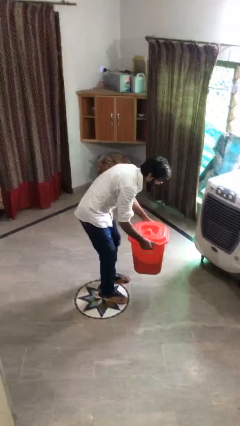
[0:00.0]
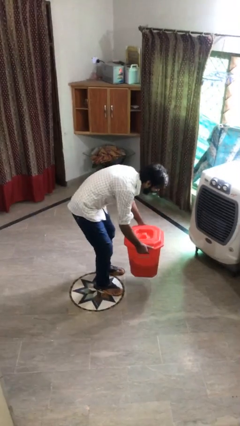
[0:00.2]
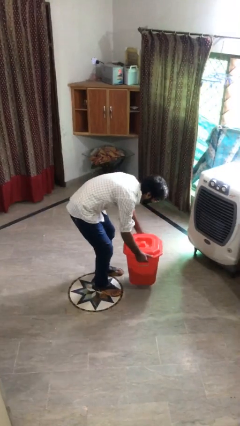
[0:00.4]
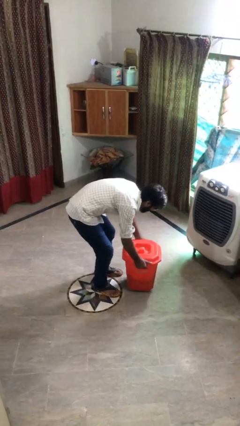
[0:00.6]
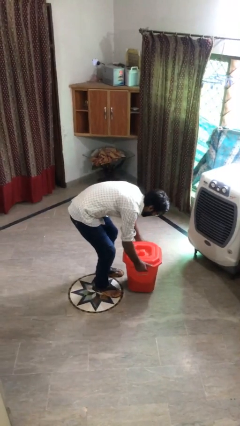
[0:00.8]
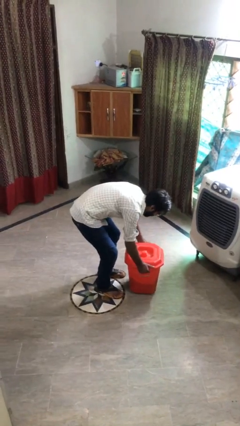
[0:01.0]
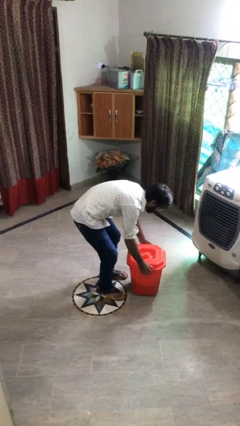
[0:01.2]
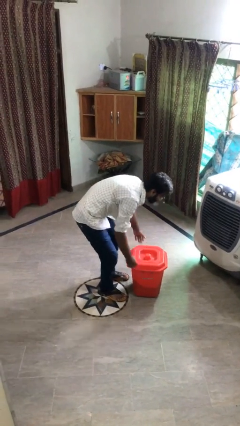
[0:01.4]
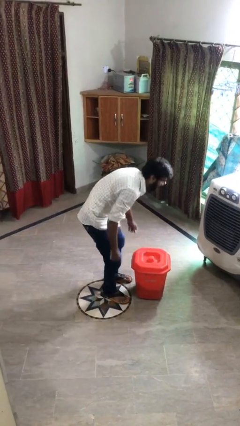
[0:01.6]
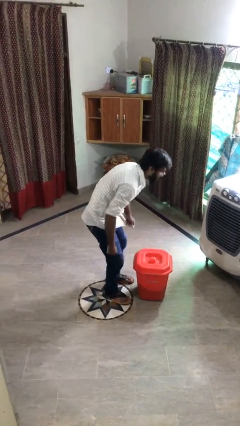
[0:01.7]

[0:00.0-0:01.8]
person puts down object on floor

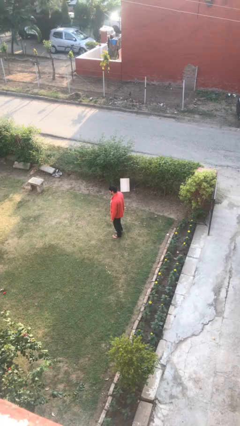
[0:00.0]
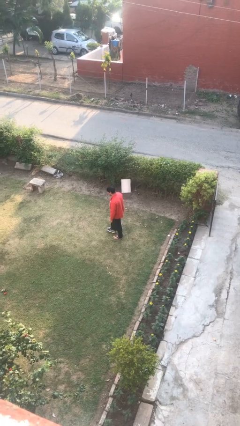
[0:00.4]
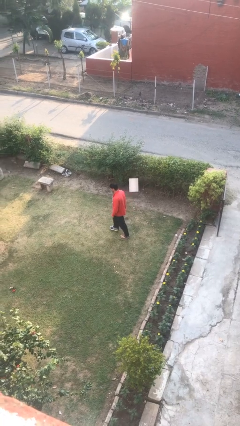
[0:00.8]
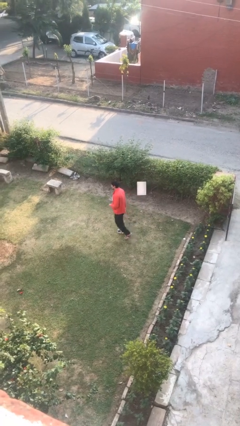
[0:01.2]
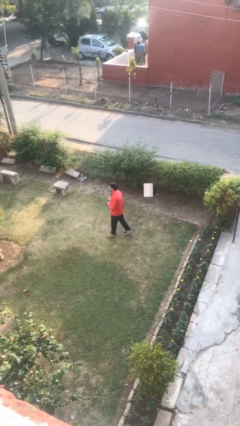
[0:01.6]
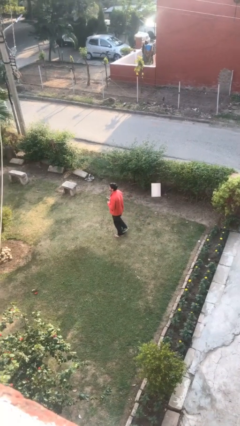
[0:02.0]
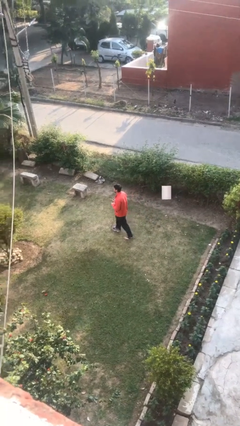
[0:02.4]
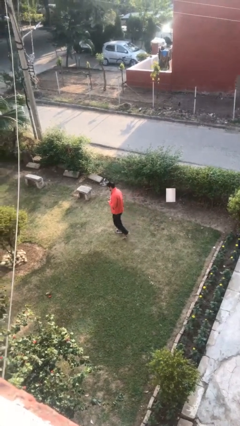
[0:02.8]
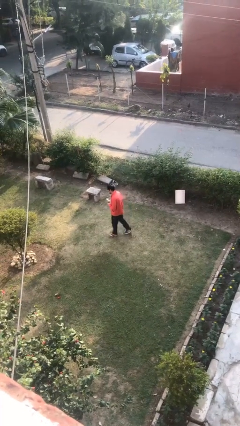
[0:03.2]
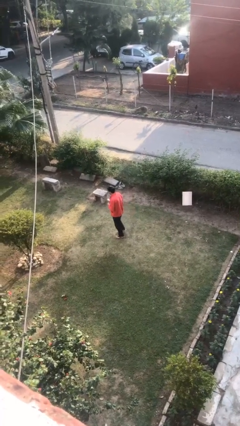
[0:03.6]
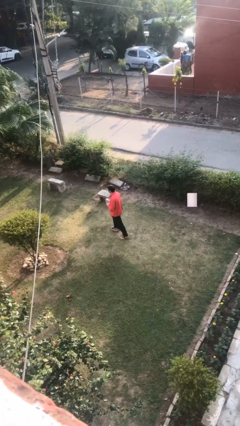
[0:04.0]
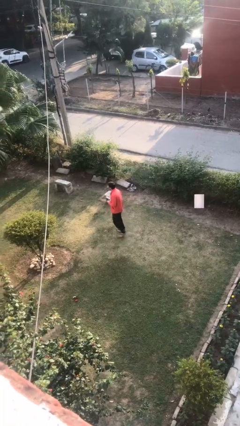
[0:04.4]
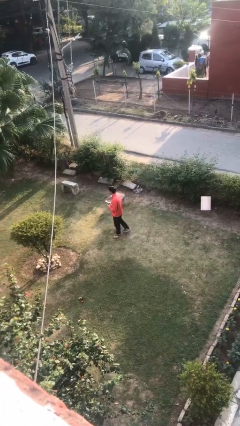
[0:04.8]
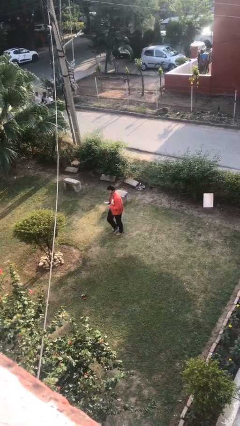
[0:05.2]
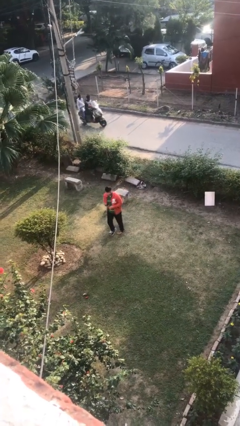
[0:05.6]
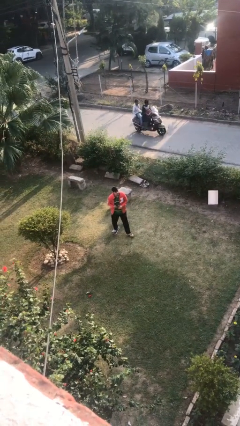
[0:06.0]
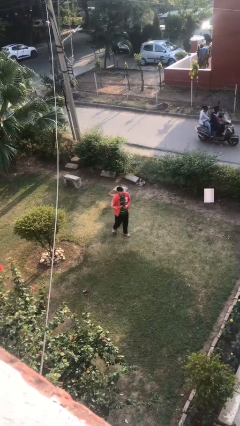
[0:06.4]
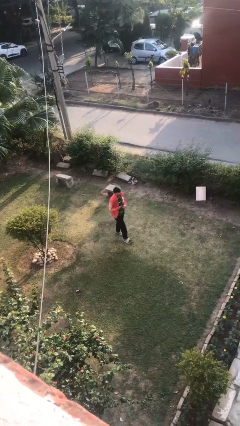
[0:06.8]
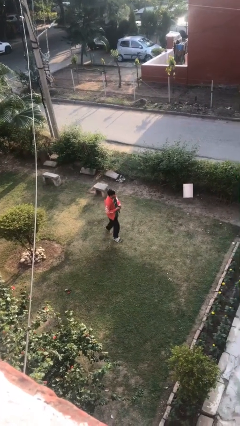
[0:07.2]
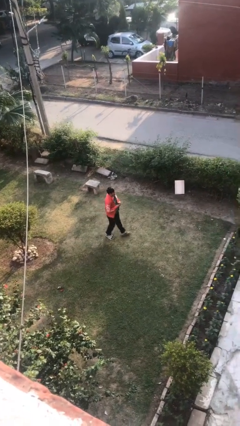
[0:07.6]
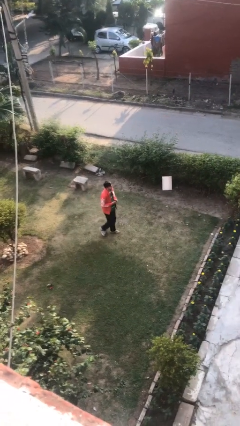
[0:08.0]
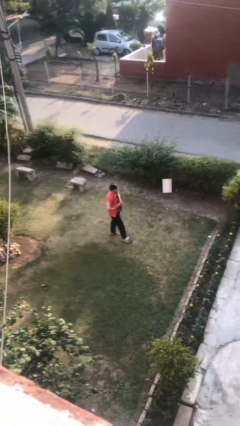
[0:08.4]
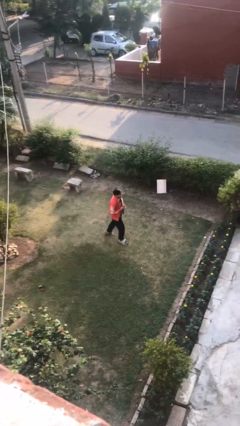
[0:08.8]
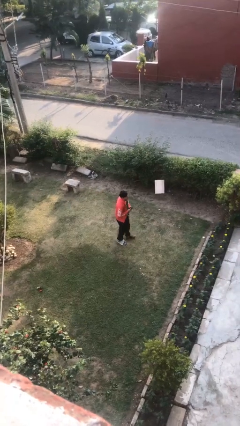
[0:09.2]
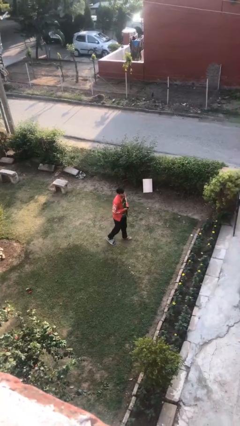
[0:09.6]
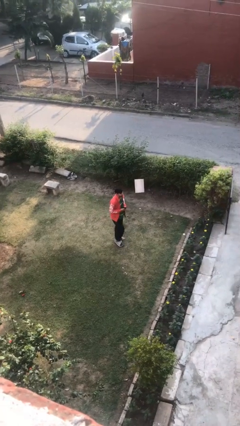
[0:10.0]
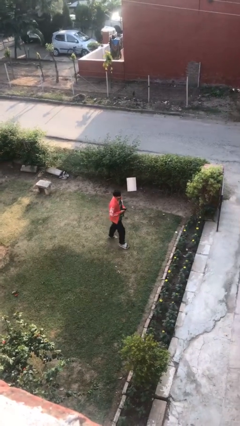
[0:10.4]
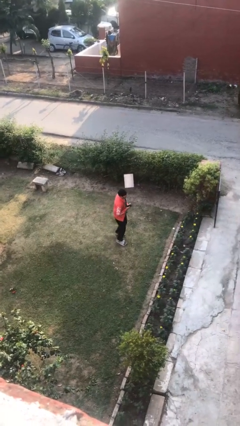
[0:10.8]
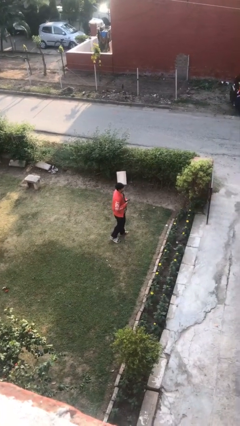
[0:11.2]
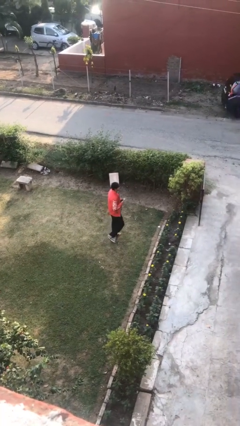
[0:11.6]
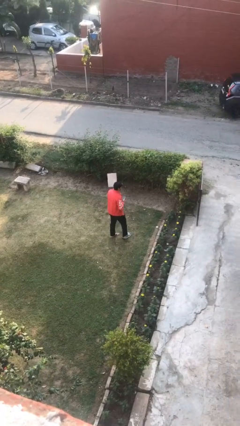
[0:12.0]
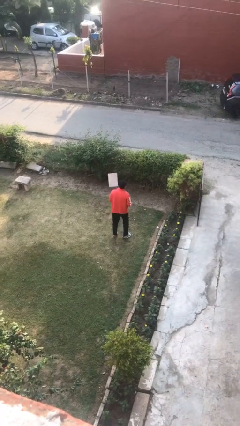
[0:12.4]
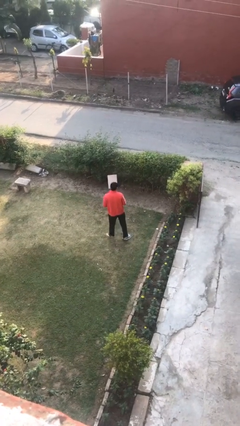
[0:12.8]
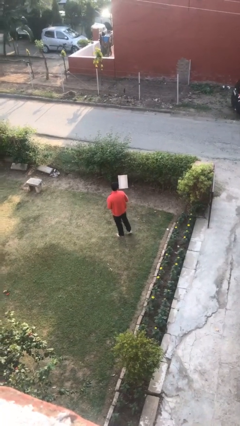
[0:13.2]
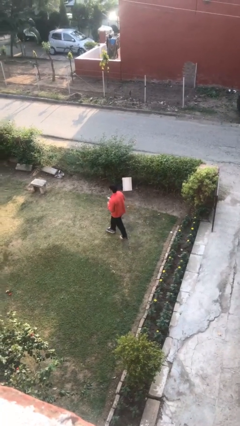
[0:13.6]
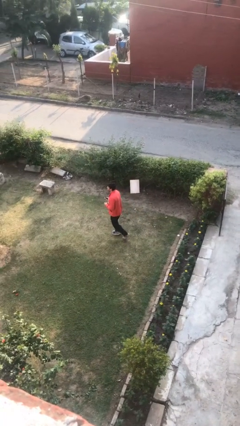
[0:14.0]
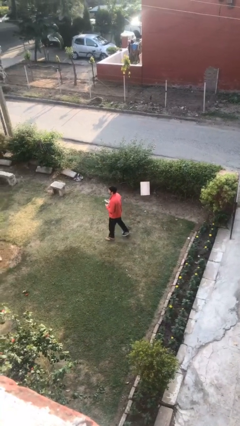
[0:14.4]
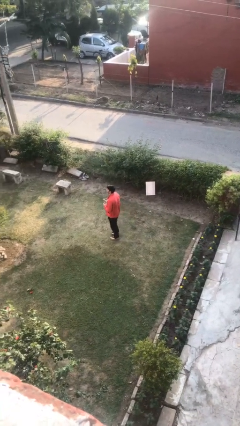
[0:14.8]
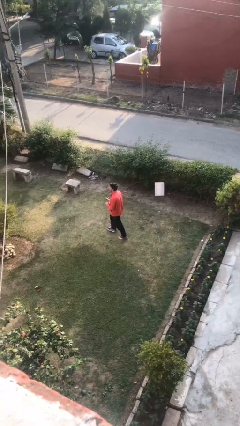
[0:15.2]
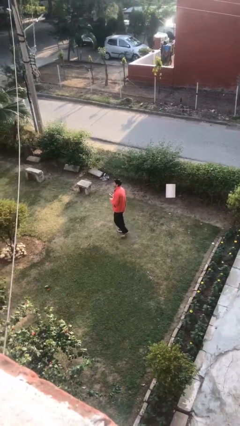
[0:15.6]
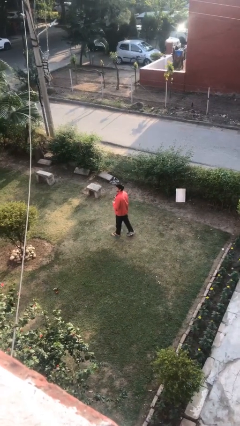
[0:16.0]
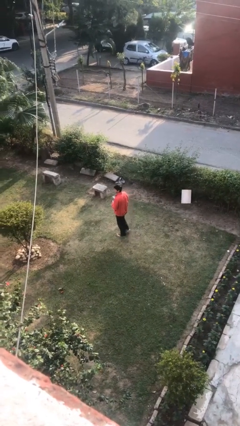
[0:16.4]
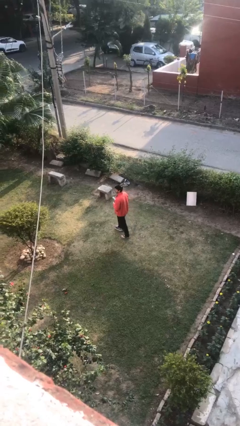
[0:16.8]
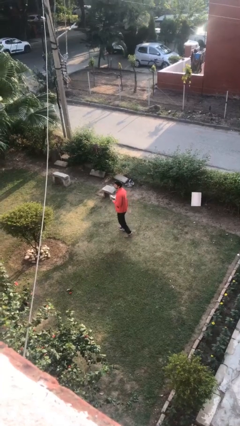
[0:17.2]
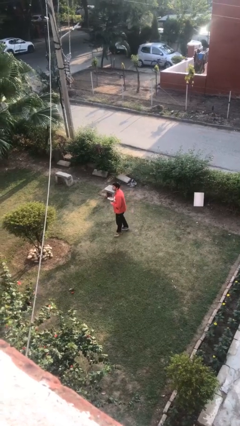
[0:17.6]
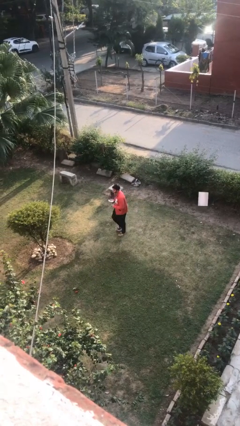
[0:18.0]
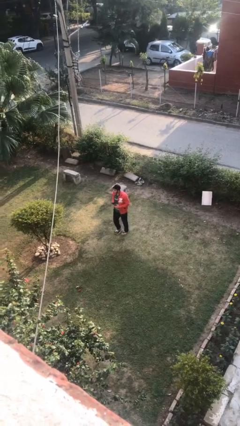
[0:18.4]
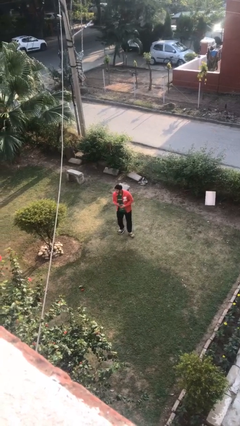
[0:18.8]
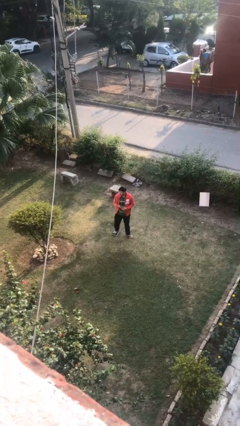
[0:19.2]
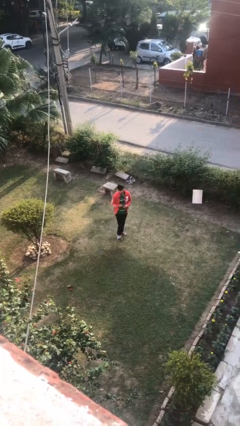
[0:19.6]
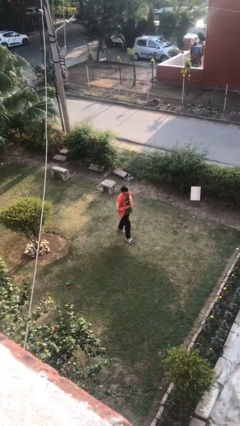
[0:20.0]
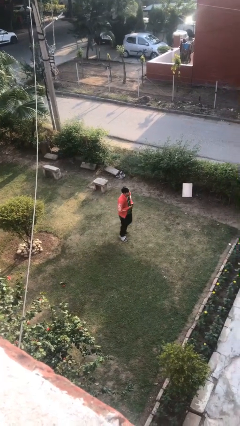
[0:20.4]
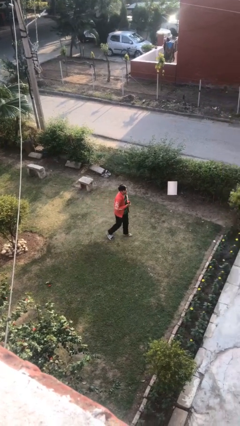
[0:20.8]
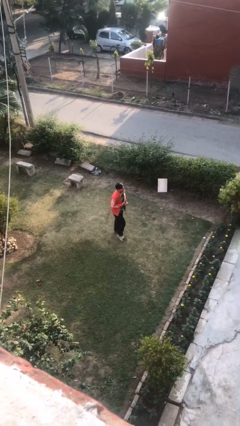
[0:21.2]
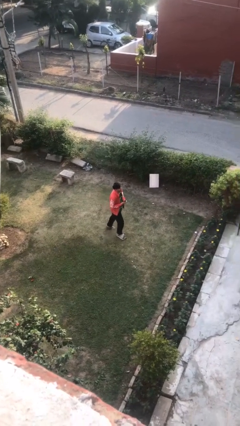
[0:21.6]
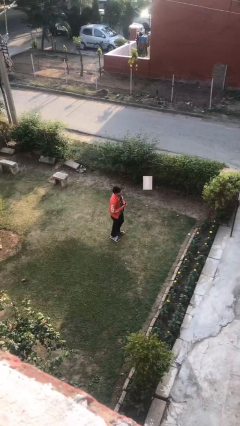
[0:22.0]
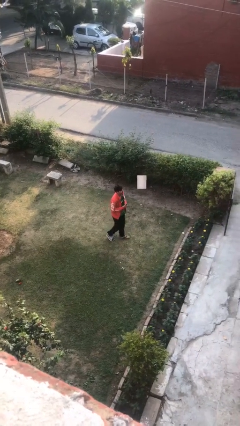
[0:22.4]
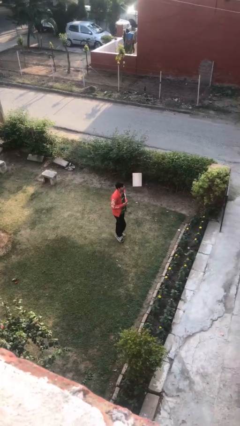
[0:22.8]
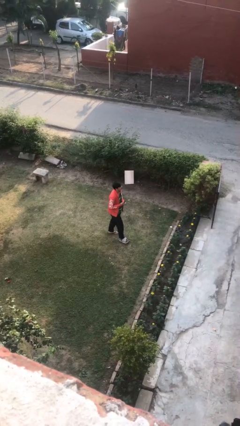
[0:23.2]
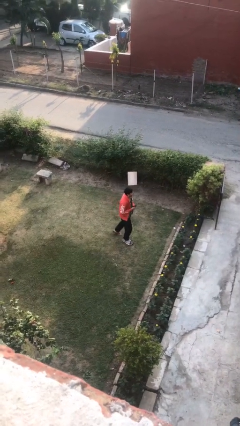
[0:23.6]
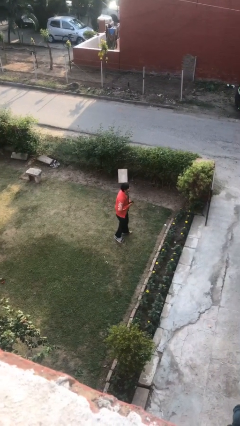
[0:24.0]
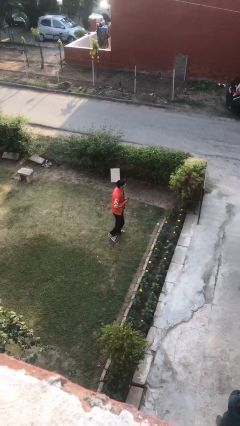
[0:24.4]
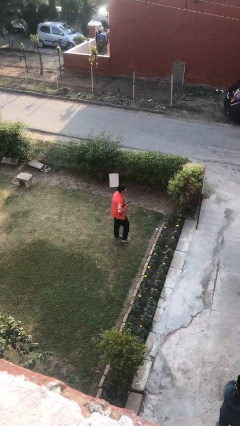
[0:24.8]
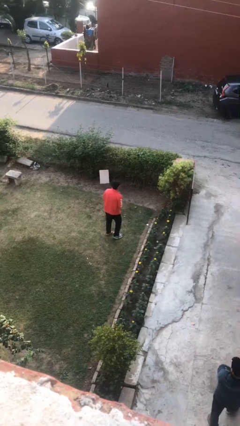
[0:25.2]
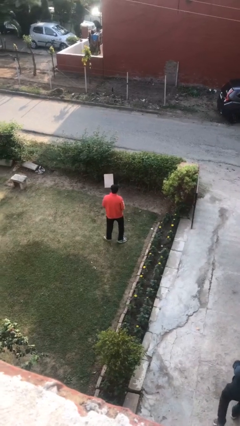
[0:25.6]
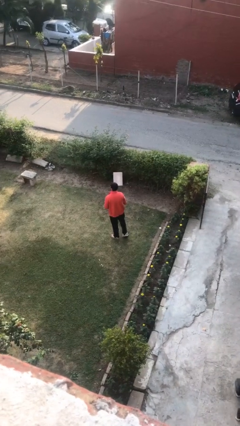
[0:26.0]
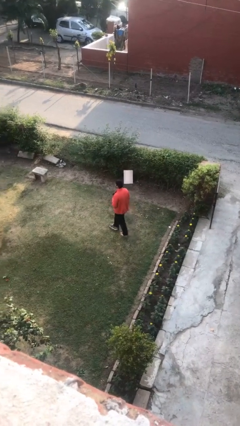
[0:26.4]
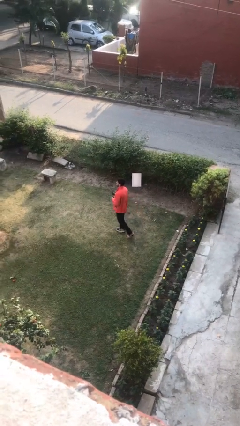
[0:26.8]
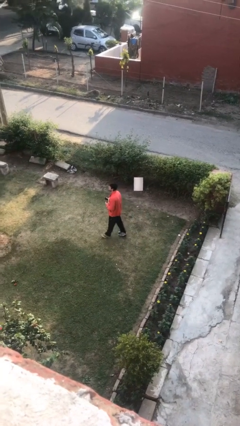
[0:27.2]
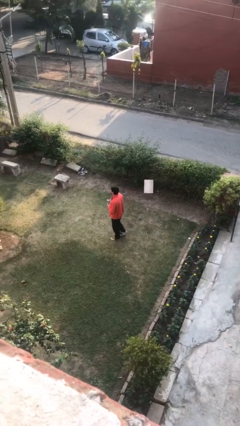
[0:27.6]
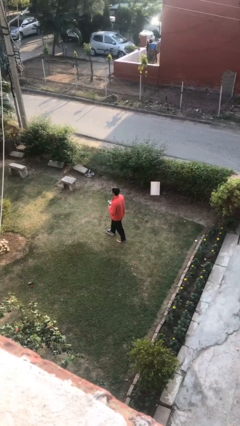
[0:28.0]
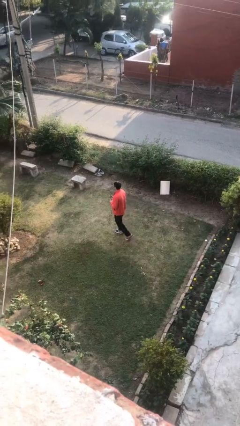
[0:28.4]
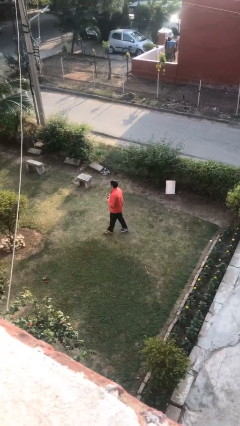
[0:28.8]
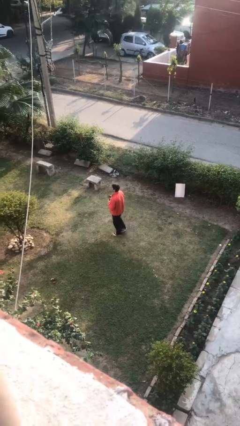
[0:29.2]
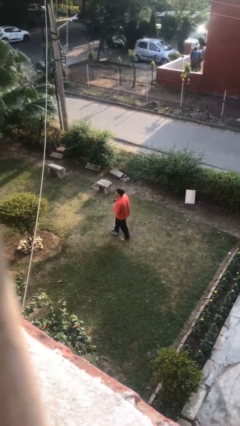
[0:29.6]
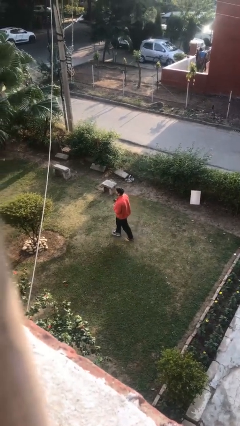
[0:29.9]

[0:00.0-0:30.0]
person walks

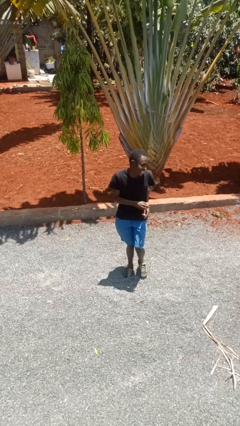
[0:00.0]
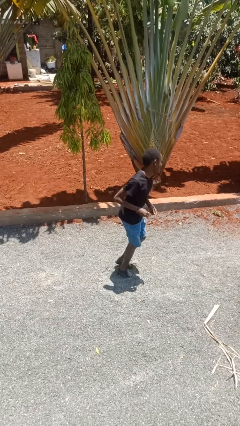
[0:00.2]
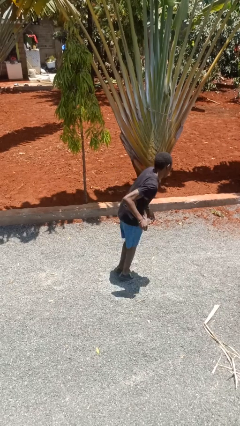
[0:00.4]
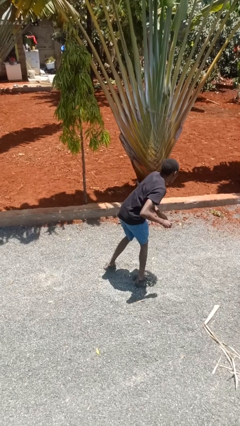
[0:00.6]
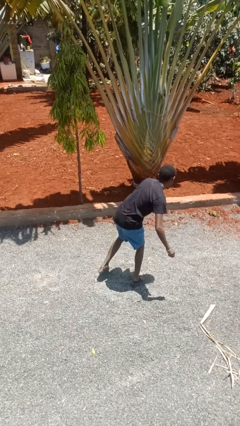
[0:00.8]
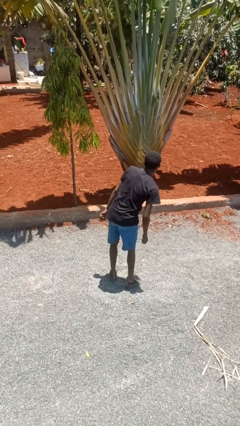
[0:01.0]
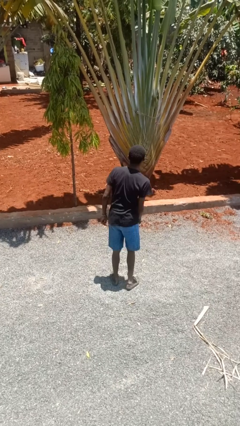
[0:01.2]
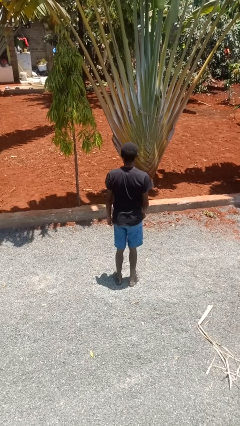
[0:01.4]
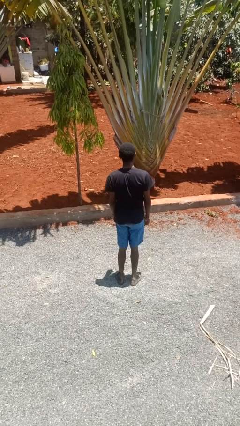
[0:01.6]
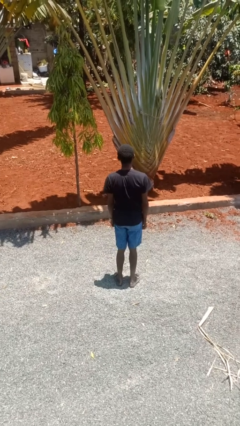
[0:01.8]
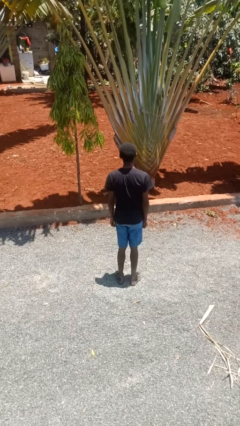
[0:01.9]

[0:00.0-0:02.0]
person twirls
